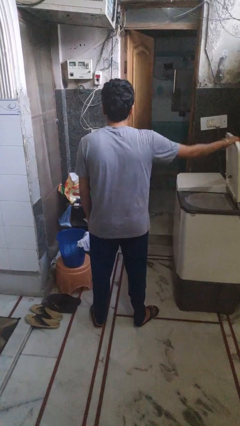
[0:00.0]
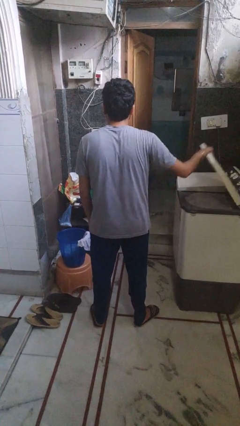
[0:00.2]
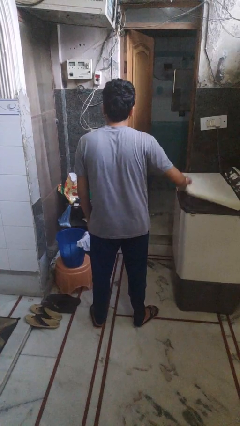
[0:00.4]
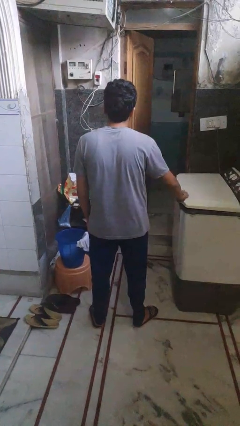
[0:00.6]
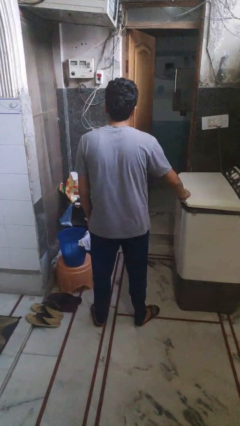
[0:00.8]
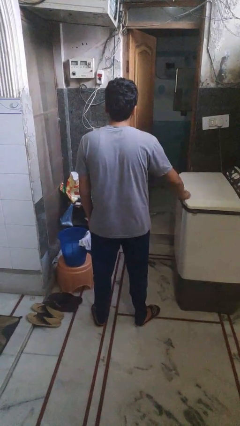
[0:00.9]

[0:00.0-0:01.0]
person closes clothes washer

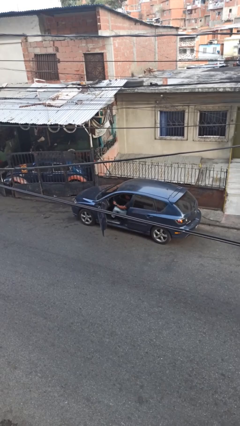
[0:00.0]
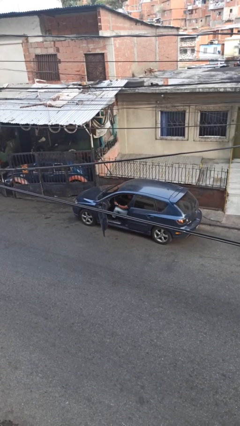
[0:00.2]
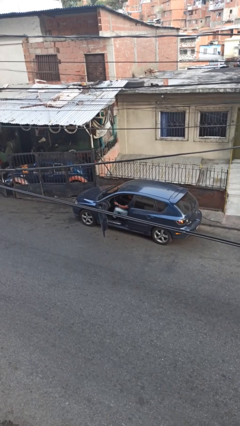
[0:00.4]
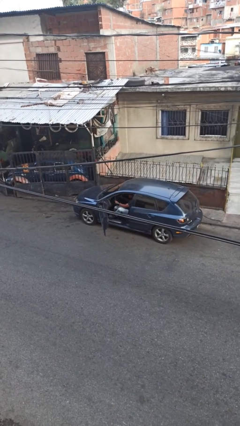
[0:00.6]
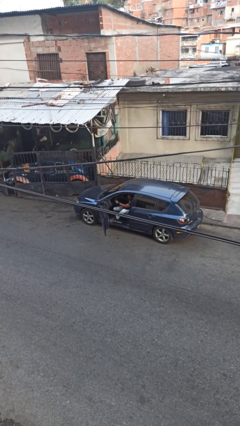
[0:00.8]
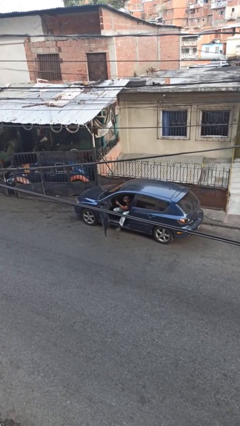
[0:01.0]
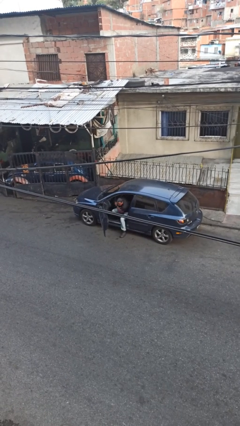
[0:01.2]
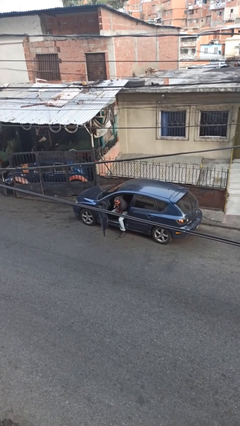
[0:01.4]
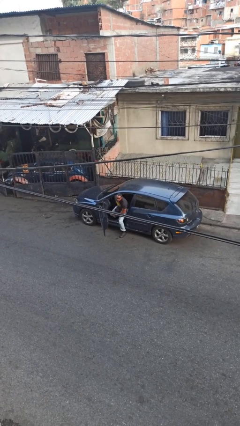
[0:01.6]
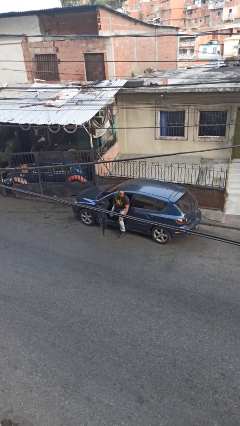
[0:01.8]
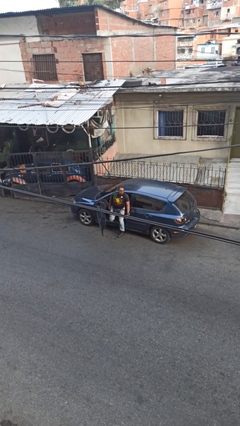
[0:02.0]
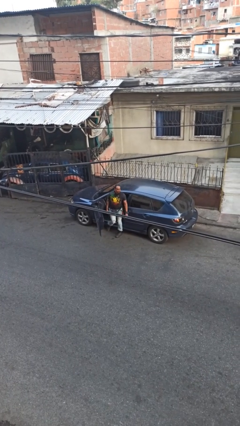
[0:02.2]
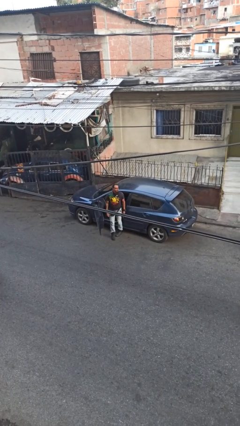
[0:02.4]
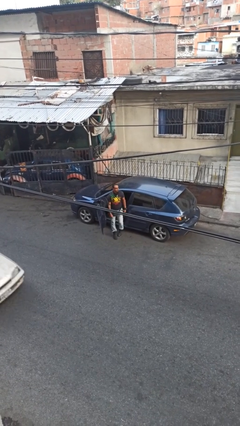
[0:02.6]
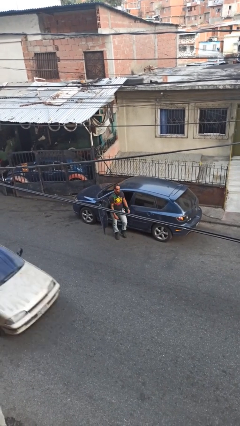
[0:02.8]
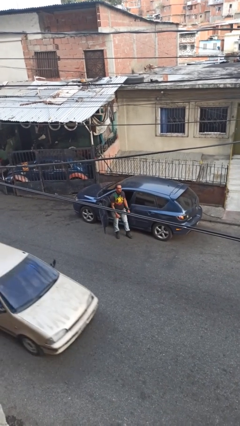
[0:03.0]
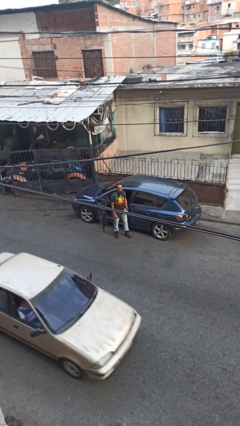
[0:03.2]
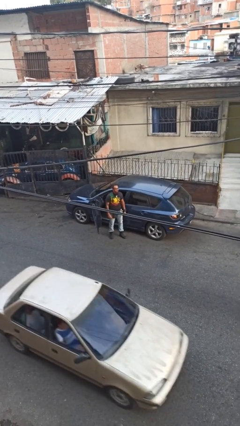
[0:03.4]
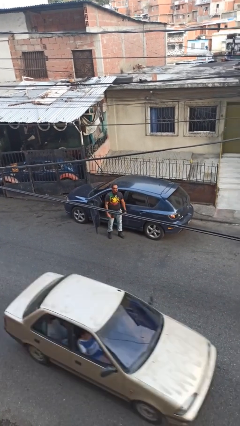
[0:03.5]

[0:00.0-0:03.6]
person exits car

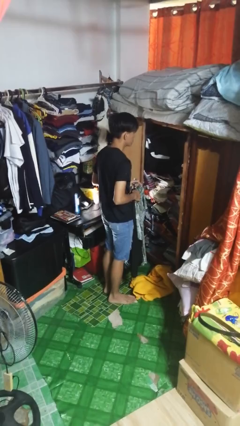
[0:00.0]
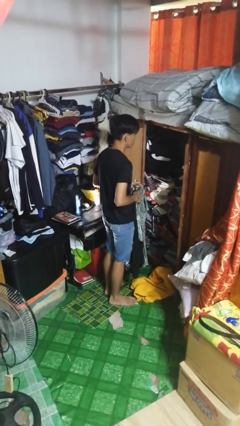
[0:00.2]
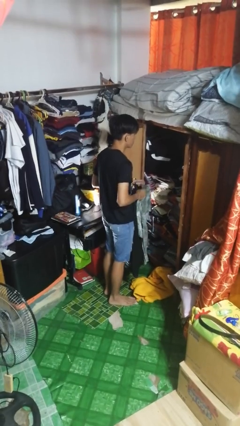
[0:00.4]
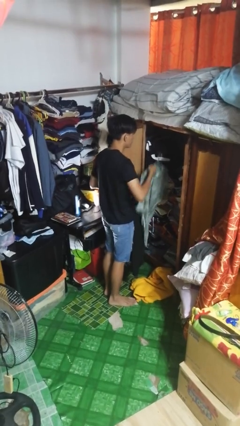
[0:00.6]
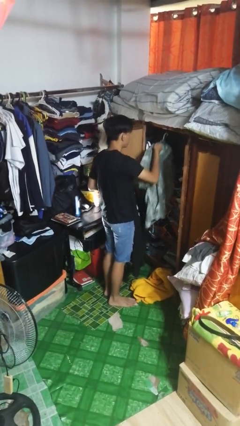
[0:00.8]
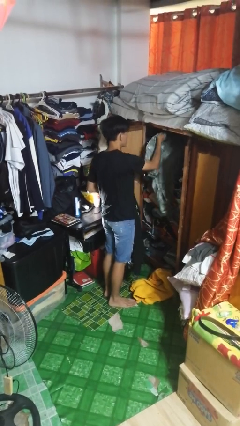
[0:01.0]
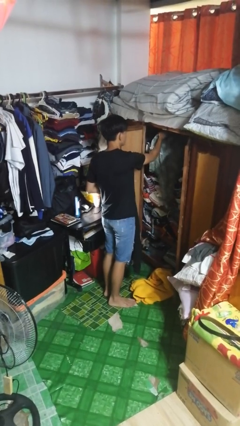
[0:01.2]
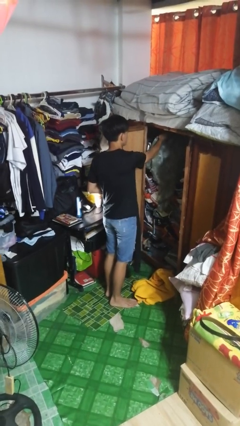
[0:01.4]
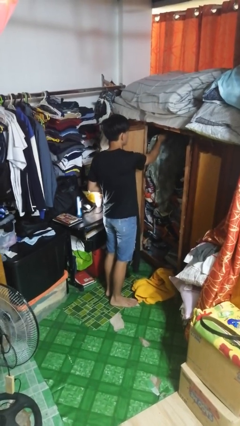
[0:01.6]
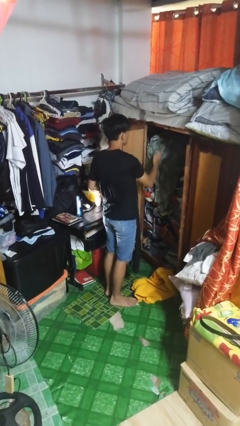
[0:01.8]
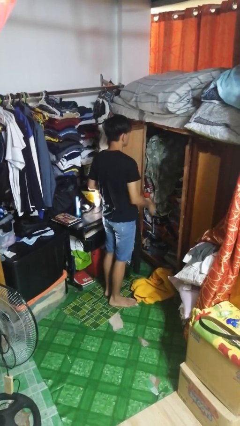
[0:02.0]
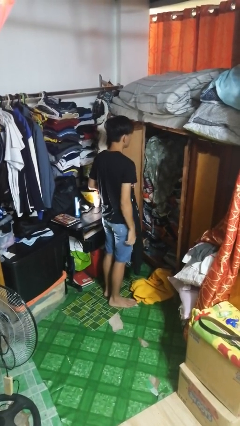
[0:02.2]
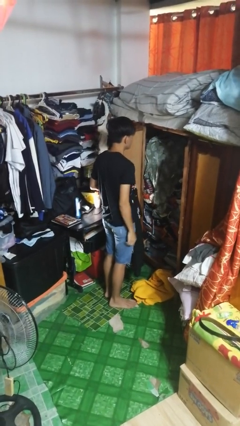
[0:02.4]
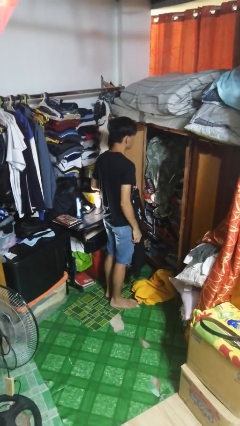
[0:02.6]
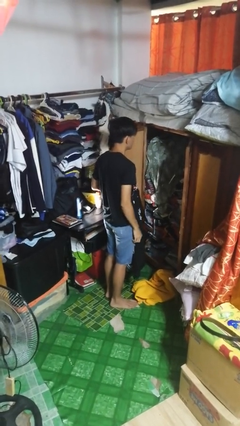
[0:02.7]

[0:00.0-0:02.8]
person puts clothes into closet

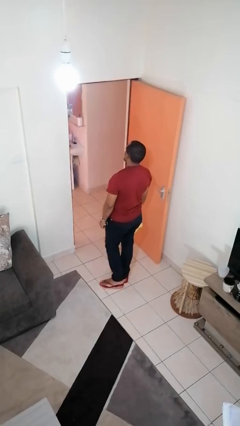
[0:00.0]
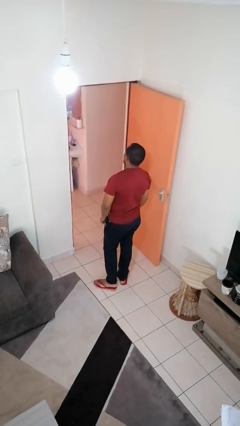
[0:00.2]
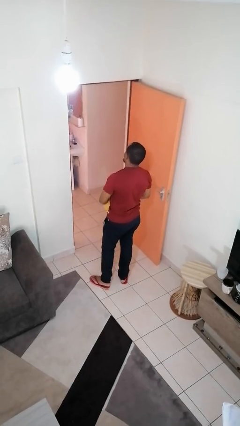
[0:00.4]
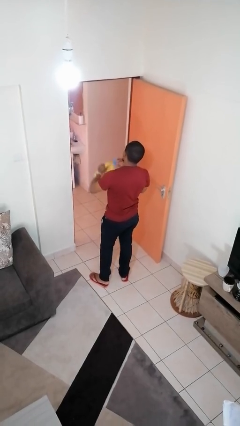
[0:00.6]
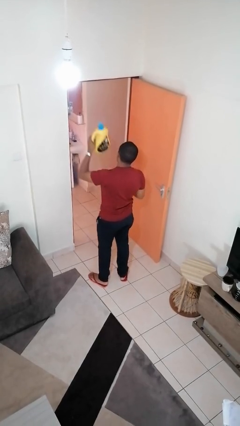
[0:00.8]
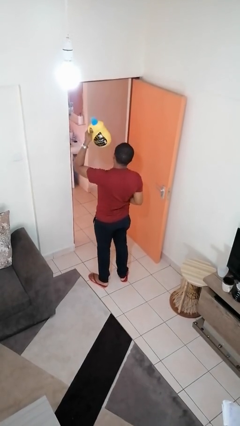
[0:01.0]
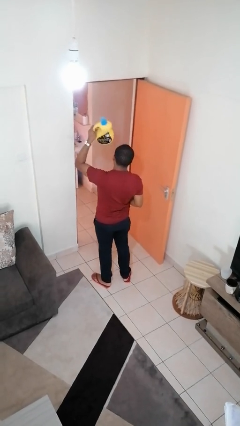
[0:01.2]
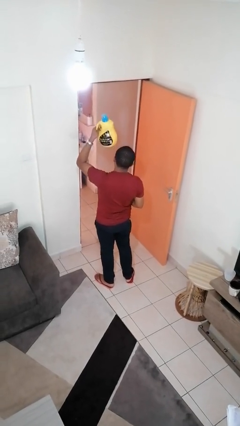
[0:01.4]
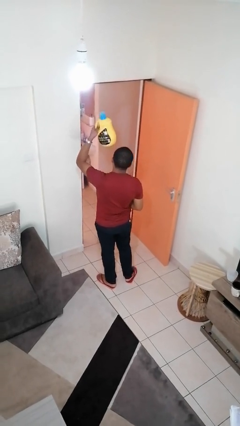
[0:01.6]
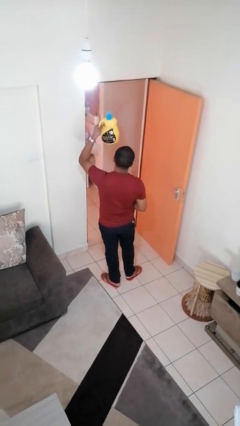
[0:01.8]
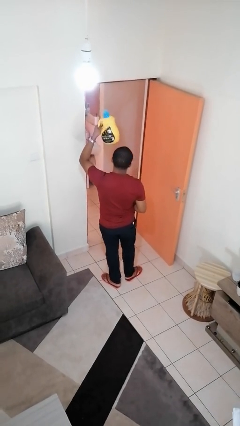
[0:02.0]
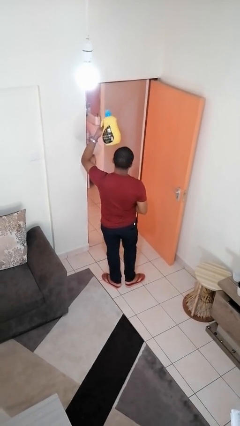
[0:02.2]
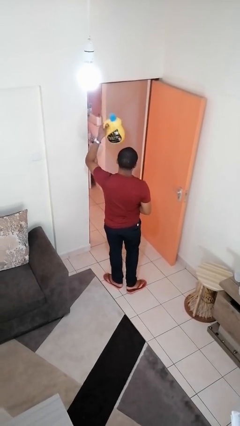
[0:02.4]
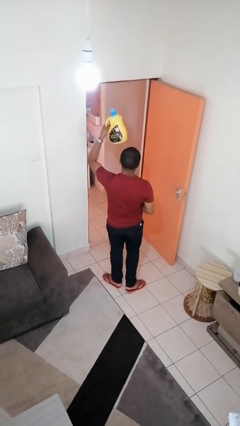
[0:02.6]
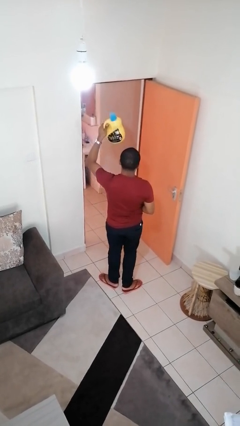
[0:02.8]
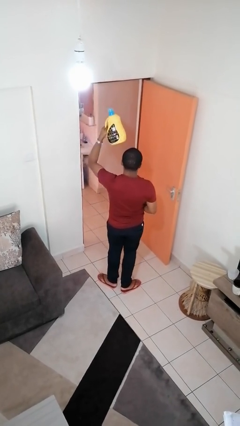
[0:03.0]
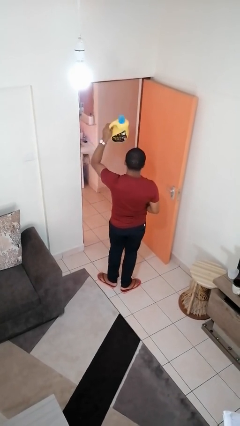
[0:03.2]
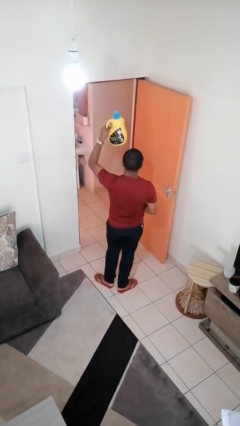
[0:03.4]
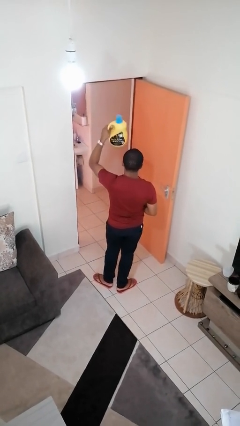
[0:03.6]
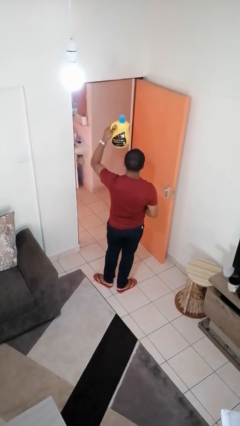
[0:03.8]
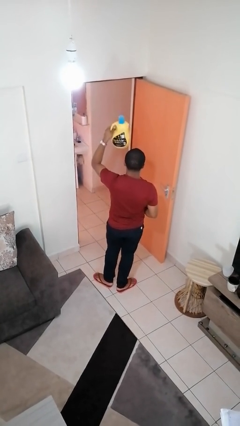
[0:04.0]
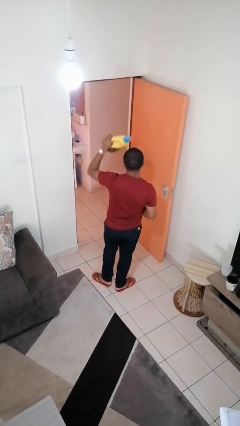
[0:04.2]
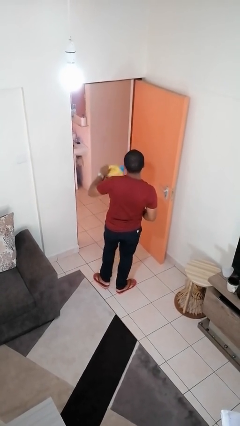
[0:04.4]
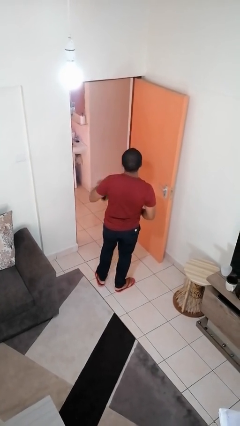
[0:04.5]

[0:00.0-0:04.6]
person holds object above head

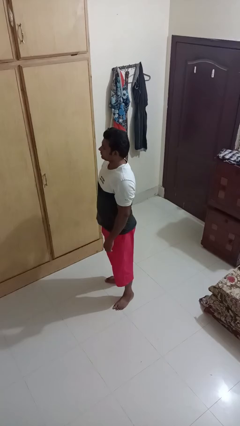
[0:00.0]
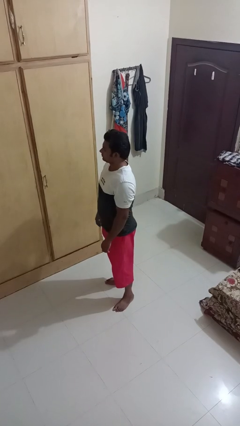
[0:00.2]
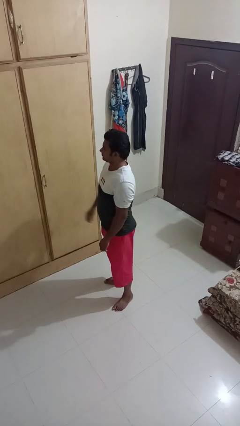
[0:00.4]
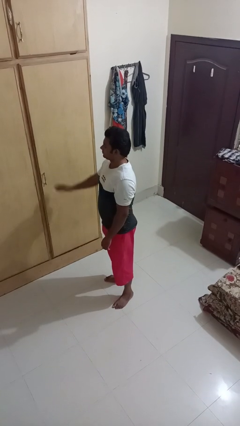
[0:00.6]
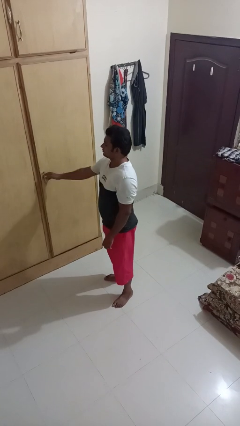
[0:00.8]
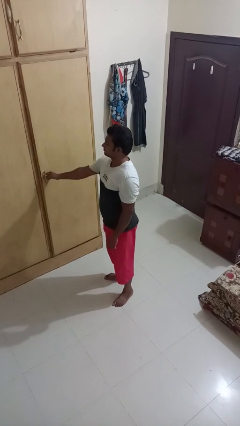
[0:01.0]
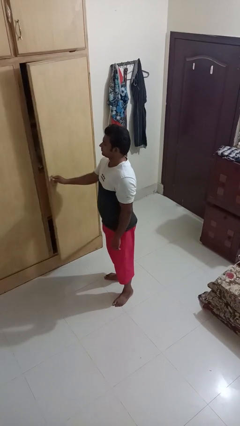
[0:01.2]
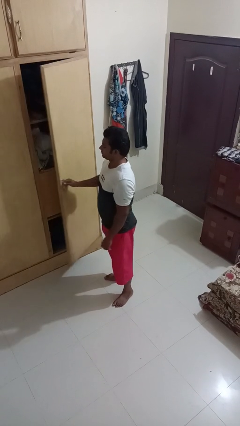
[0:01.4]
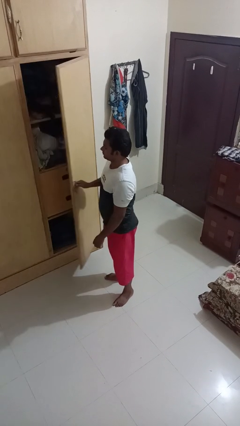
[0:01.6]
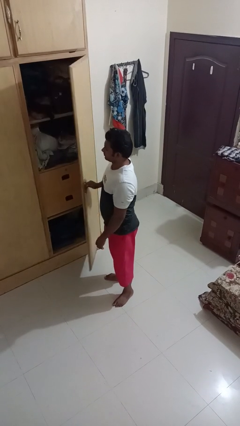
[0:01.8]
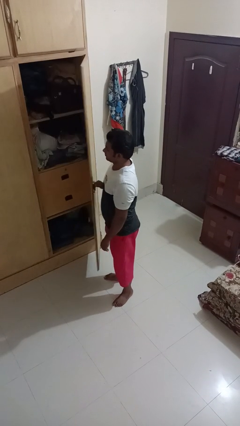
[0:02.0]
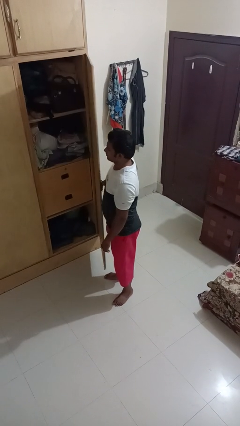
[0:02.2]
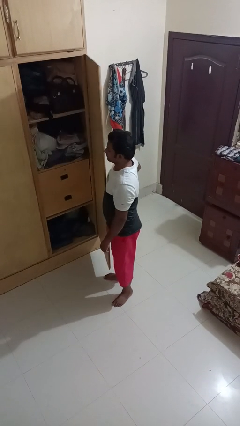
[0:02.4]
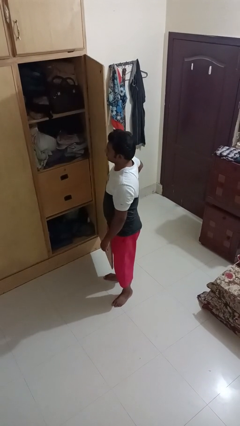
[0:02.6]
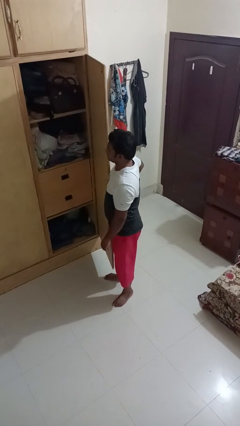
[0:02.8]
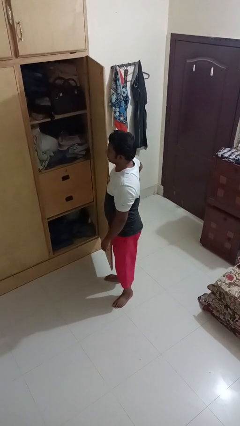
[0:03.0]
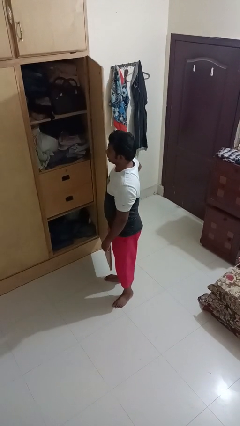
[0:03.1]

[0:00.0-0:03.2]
person opens closet door

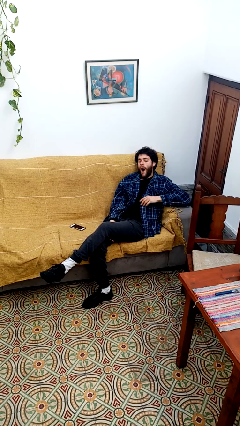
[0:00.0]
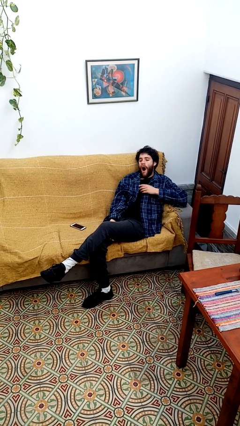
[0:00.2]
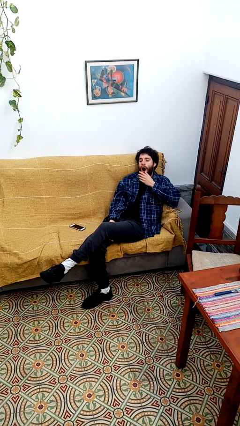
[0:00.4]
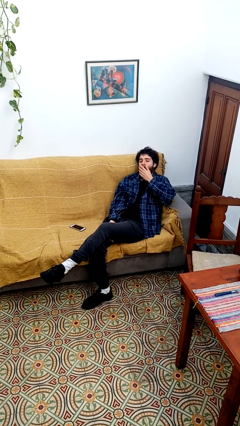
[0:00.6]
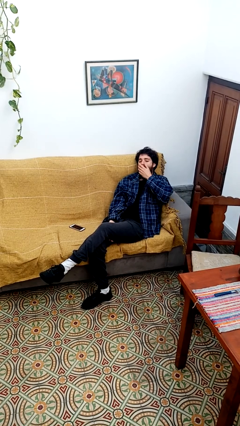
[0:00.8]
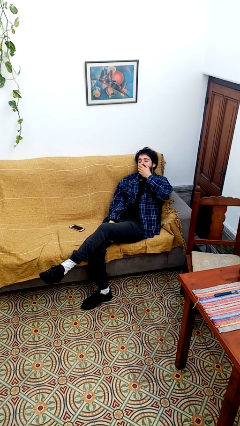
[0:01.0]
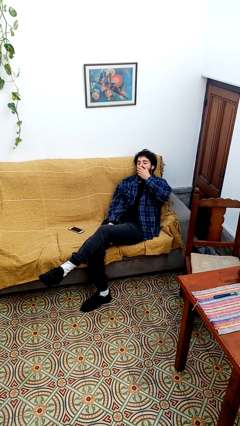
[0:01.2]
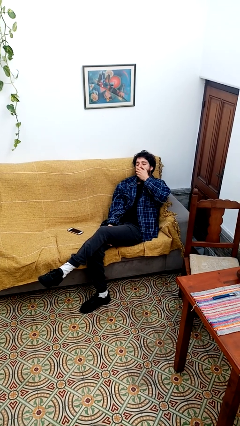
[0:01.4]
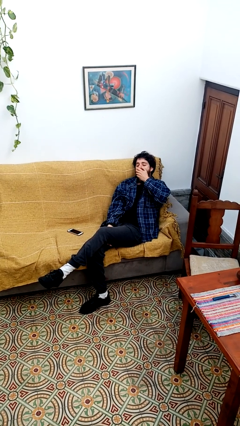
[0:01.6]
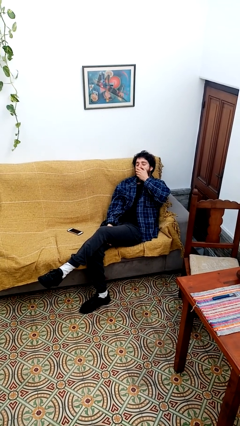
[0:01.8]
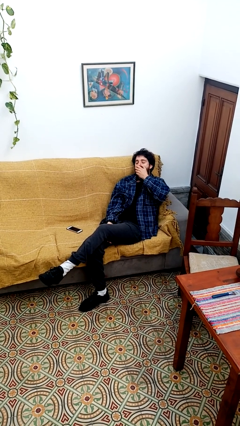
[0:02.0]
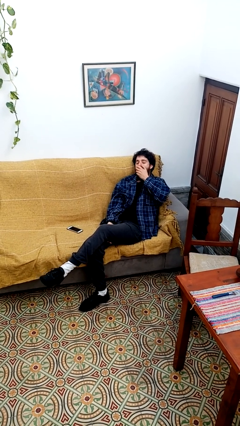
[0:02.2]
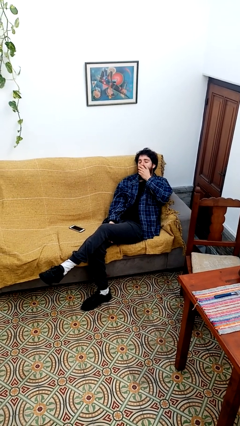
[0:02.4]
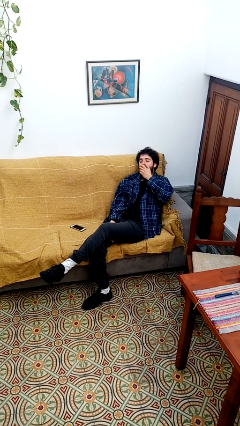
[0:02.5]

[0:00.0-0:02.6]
person yawns
